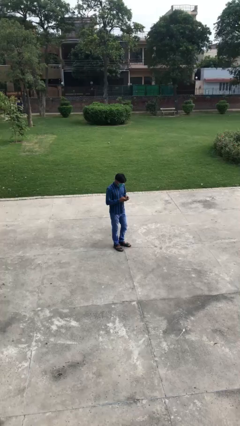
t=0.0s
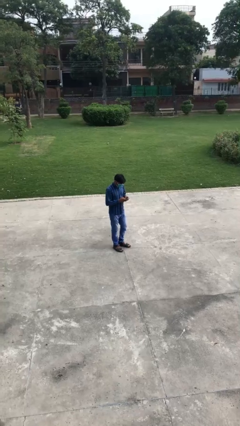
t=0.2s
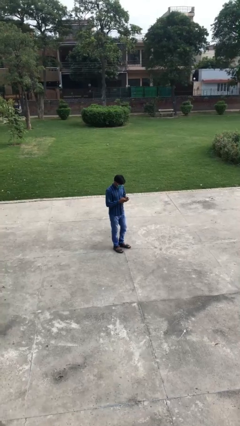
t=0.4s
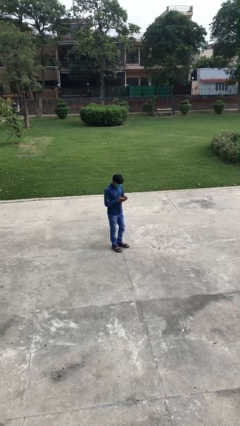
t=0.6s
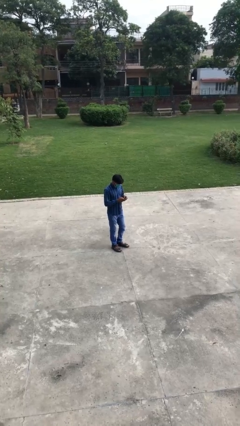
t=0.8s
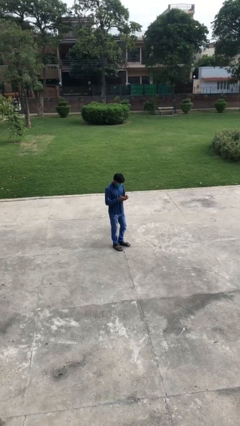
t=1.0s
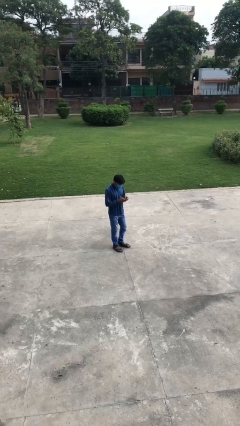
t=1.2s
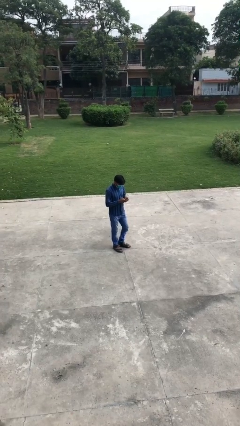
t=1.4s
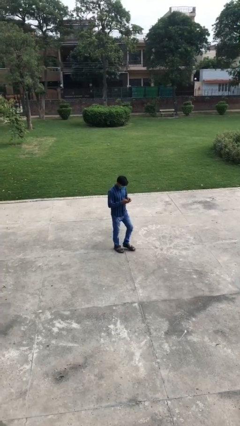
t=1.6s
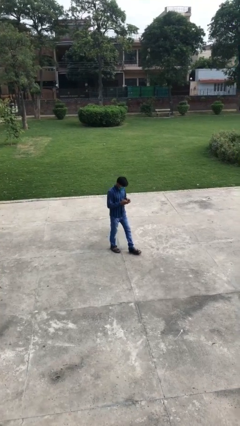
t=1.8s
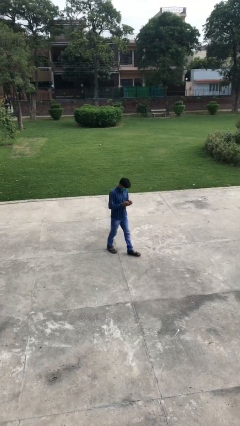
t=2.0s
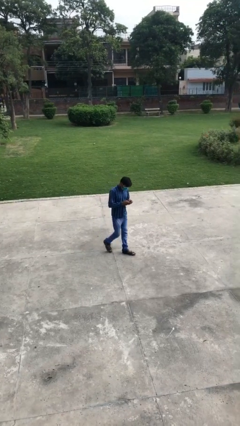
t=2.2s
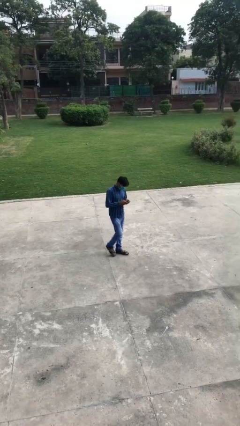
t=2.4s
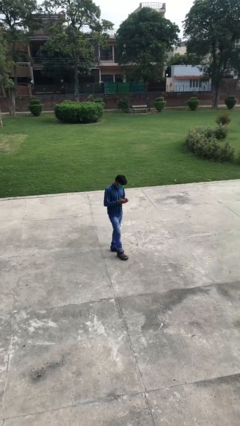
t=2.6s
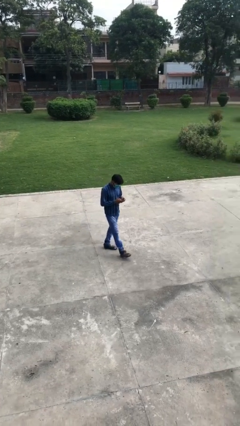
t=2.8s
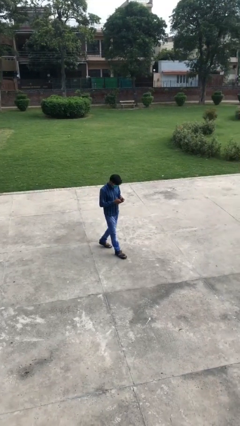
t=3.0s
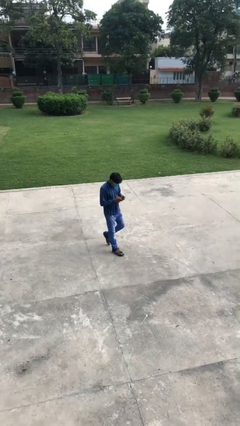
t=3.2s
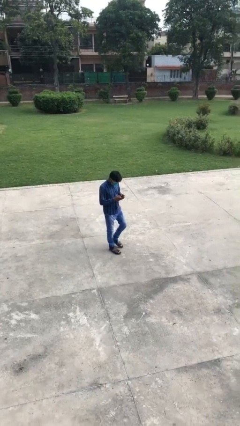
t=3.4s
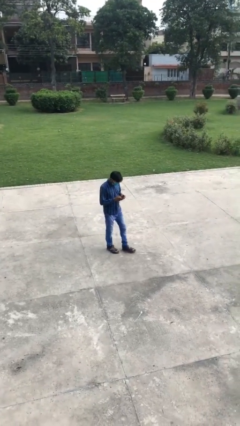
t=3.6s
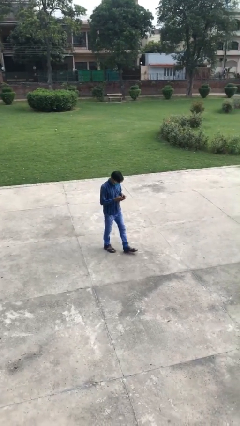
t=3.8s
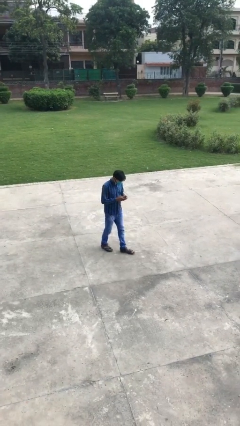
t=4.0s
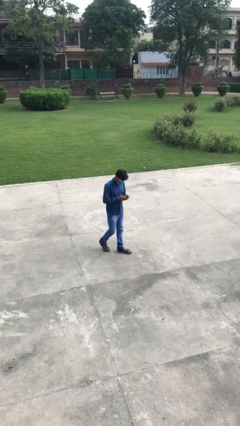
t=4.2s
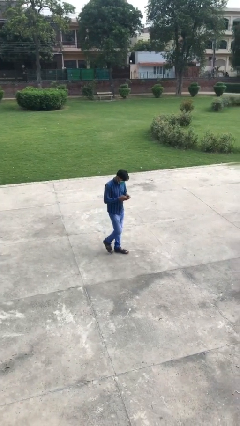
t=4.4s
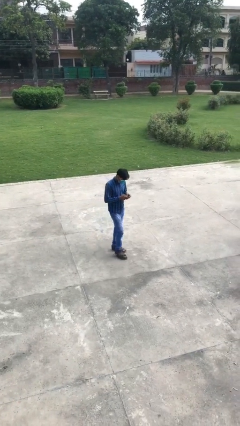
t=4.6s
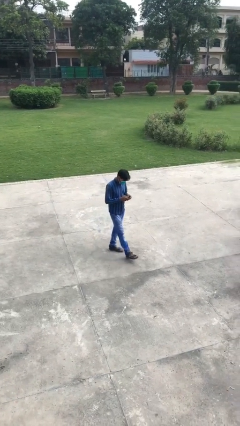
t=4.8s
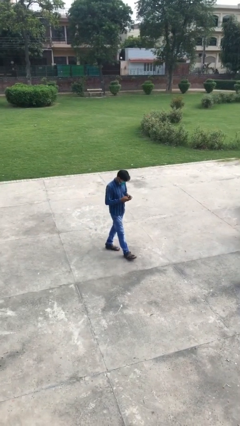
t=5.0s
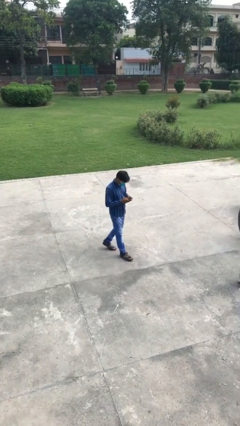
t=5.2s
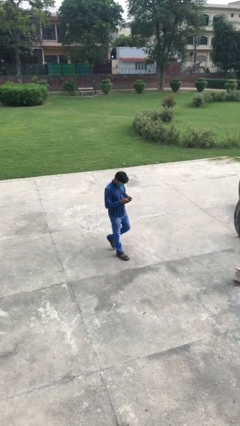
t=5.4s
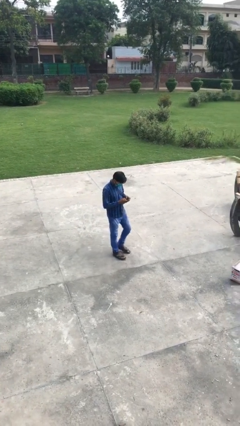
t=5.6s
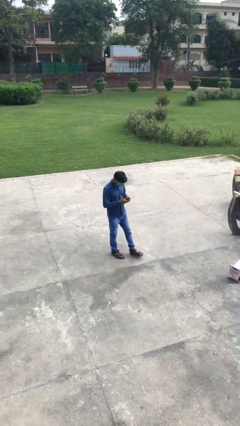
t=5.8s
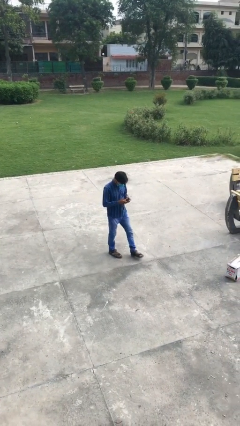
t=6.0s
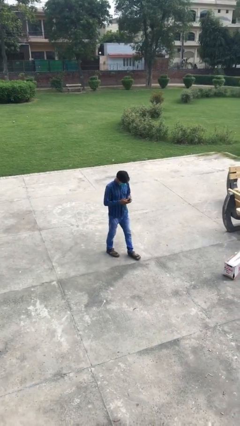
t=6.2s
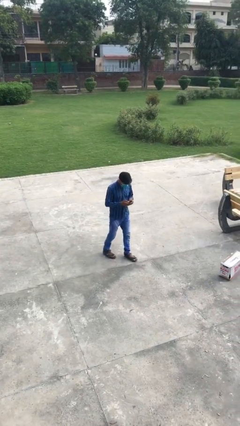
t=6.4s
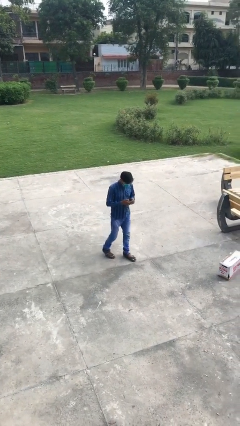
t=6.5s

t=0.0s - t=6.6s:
person texts on phone

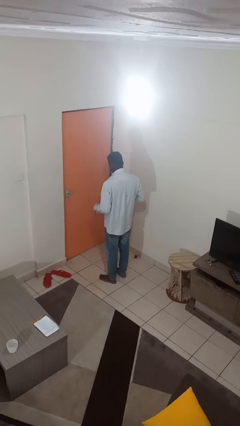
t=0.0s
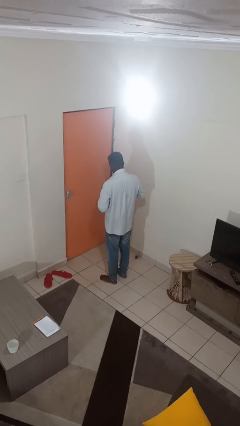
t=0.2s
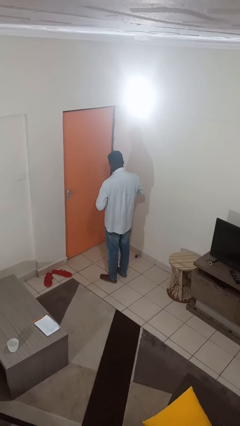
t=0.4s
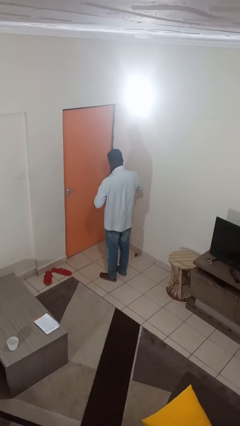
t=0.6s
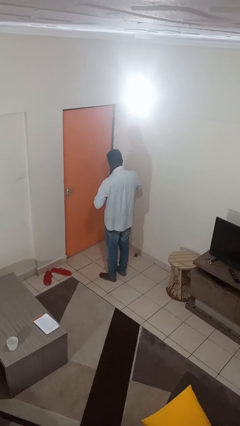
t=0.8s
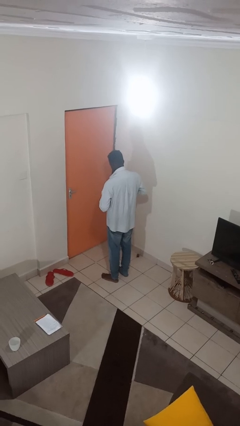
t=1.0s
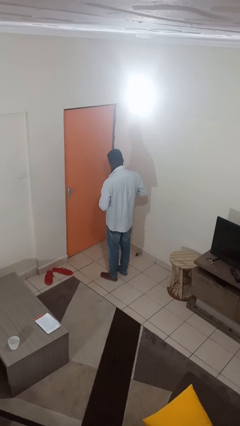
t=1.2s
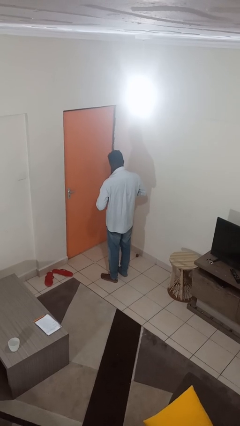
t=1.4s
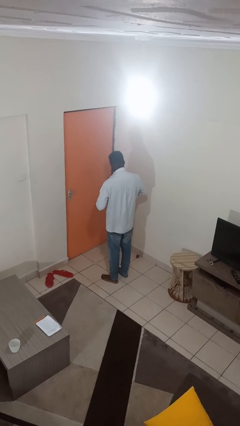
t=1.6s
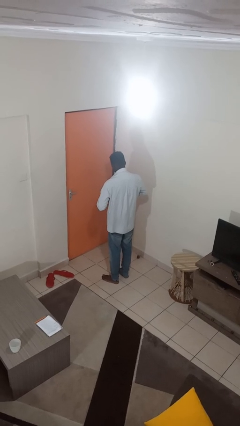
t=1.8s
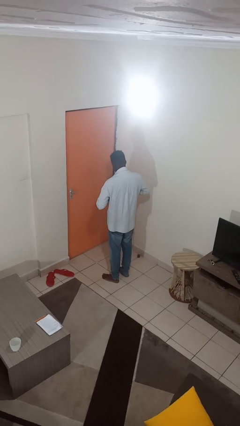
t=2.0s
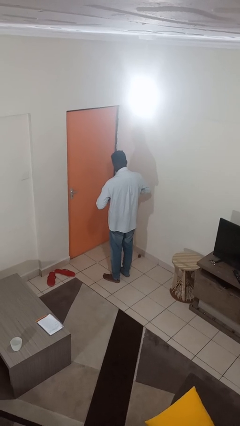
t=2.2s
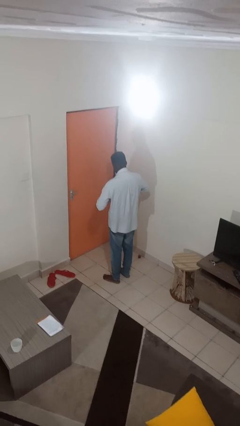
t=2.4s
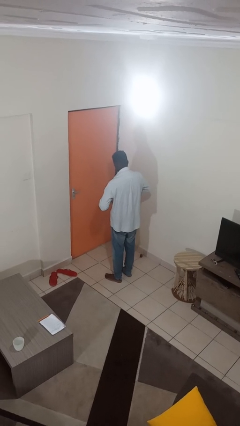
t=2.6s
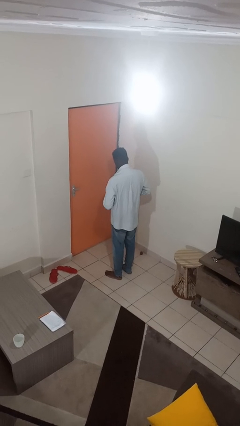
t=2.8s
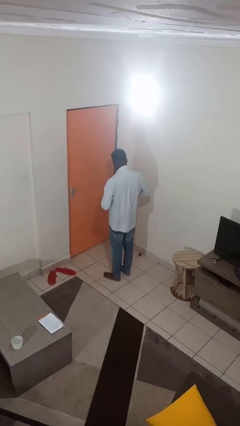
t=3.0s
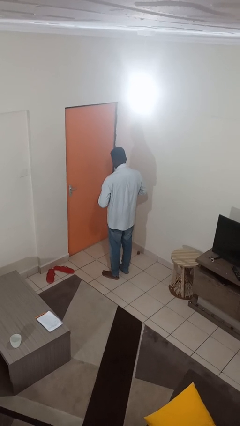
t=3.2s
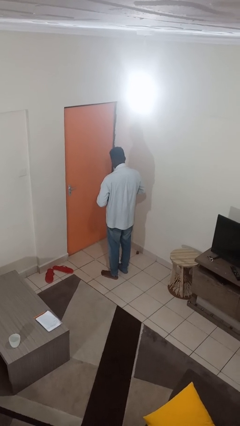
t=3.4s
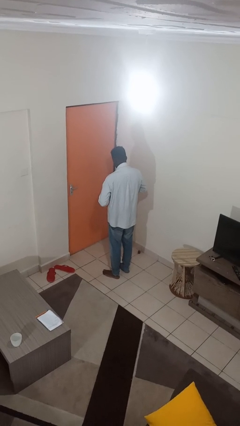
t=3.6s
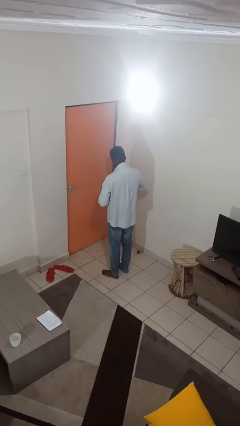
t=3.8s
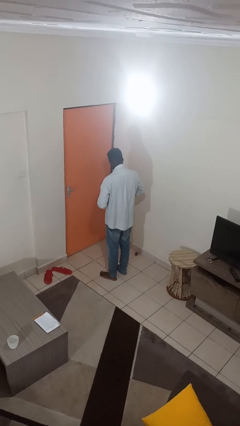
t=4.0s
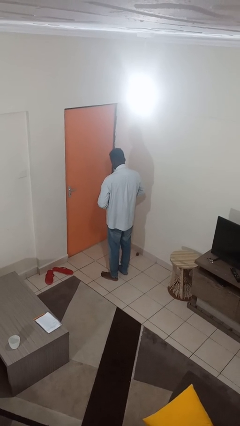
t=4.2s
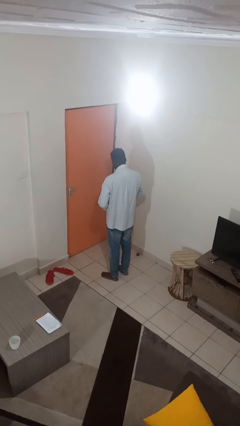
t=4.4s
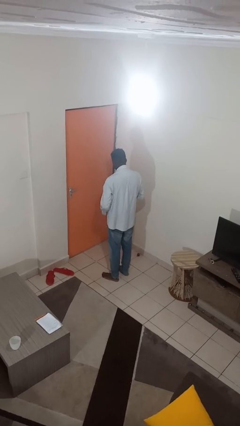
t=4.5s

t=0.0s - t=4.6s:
person unbuttons shirt

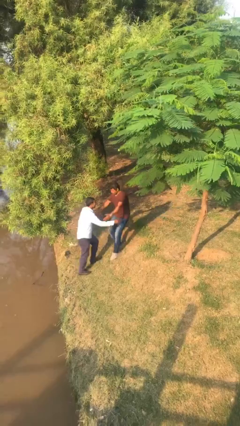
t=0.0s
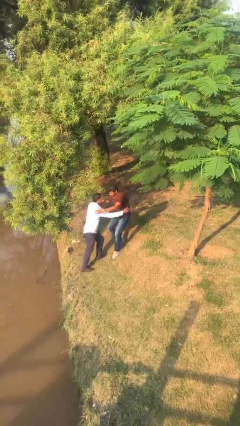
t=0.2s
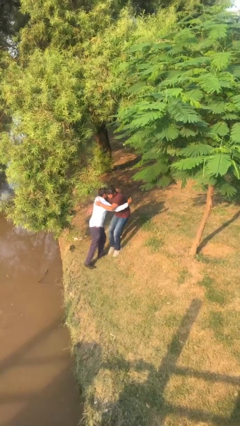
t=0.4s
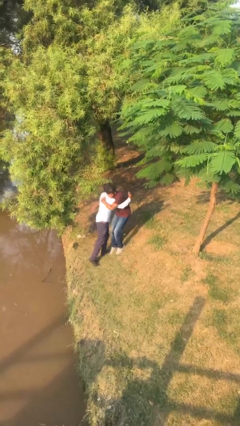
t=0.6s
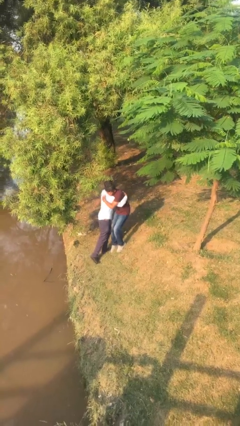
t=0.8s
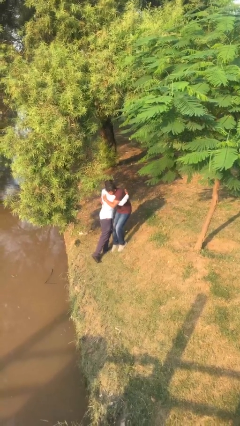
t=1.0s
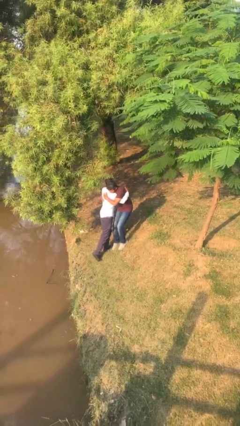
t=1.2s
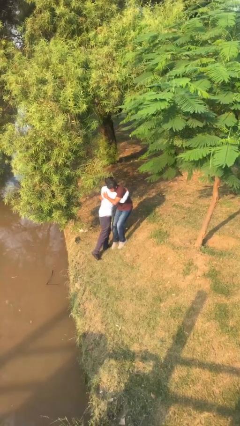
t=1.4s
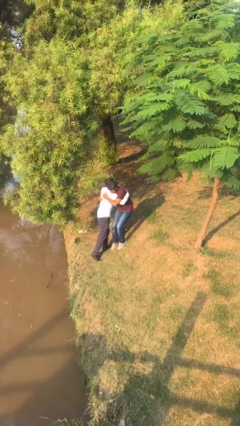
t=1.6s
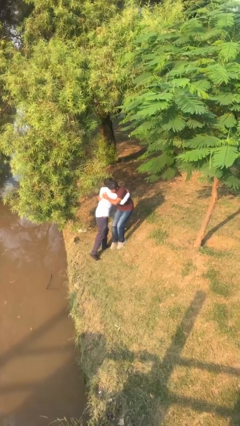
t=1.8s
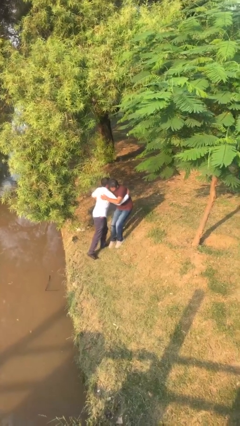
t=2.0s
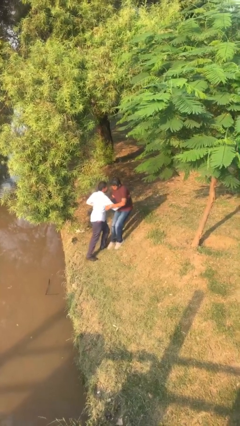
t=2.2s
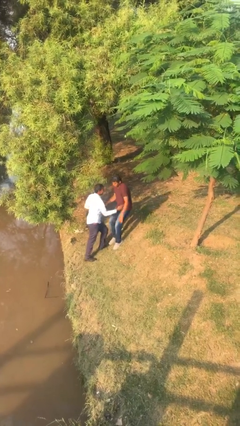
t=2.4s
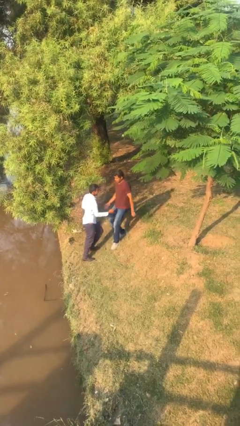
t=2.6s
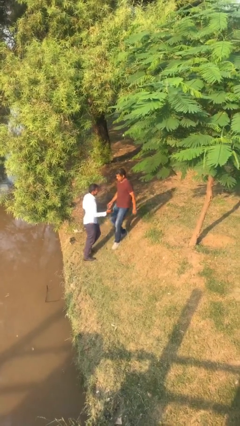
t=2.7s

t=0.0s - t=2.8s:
person embraces person

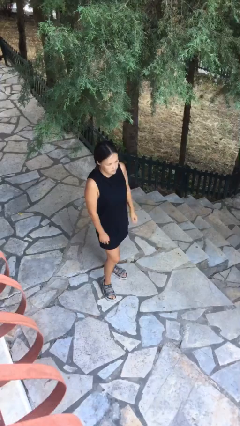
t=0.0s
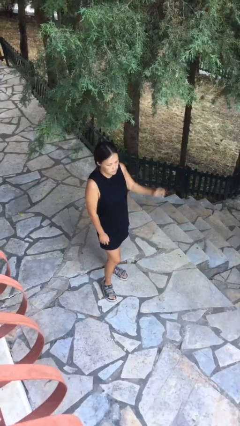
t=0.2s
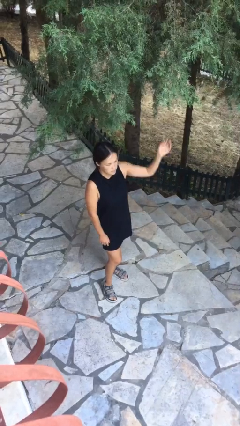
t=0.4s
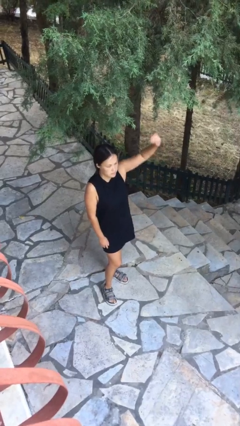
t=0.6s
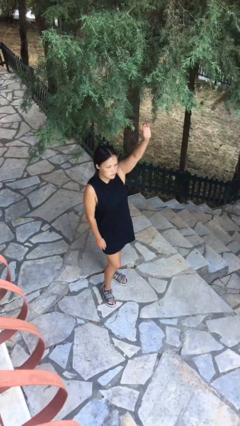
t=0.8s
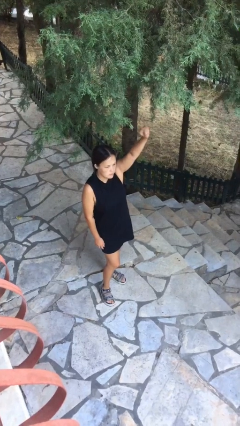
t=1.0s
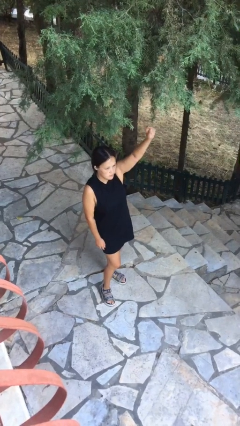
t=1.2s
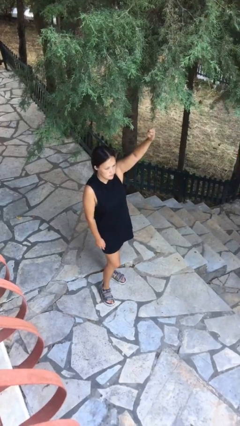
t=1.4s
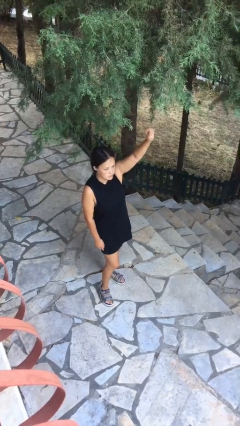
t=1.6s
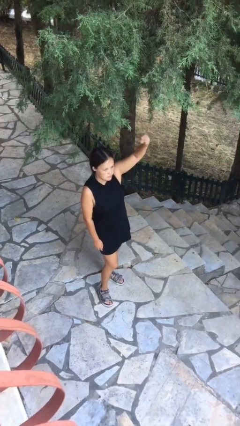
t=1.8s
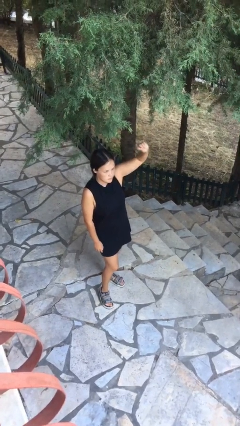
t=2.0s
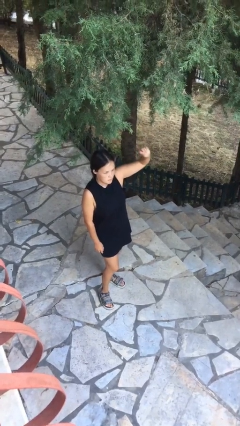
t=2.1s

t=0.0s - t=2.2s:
person gestures raise hand

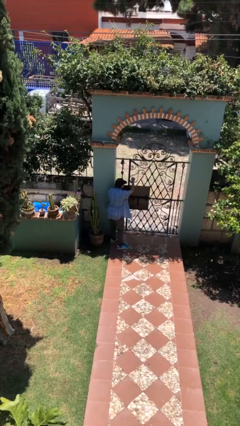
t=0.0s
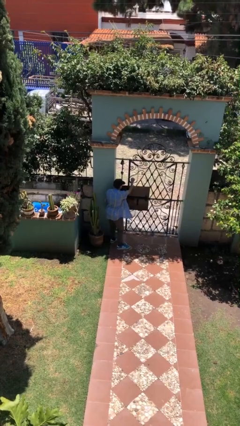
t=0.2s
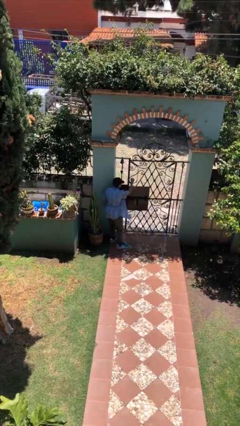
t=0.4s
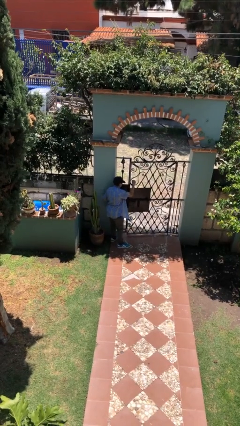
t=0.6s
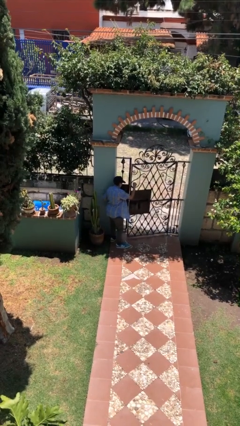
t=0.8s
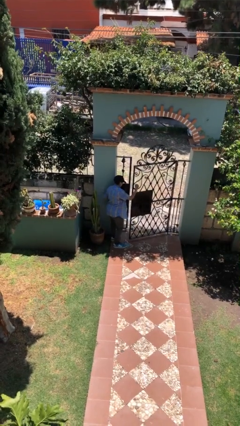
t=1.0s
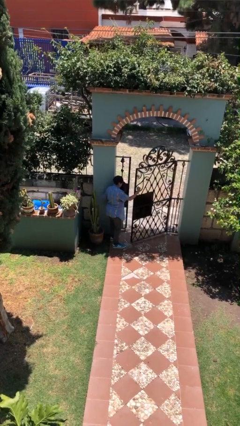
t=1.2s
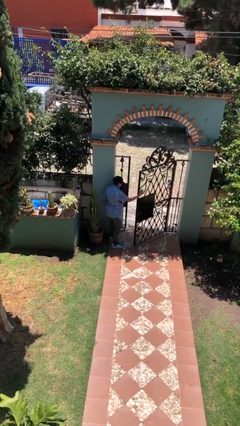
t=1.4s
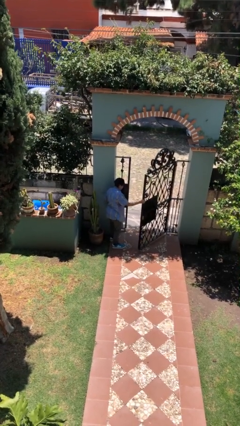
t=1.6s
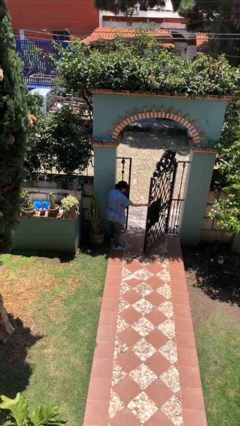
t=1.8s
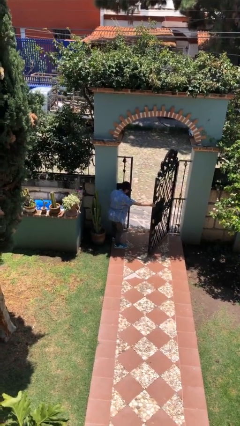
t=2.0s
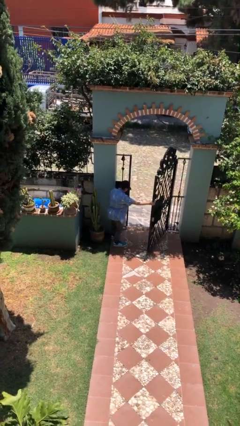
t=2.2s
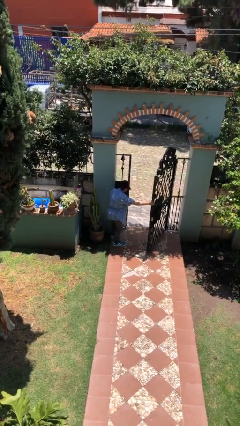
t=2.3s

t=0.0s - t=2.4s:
person opens facility door
